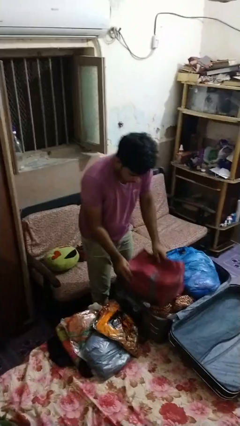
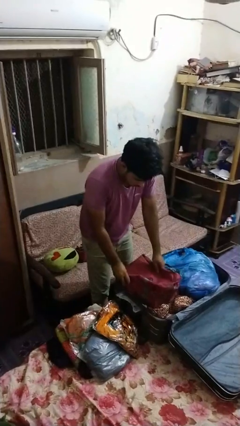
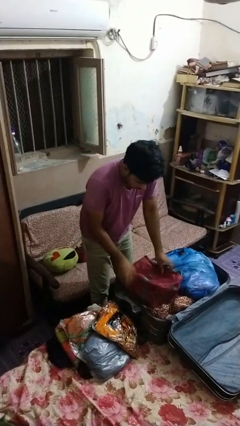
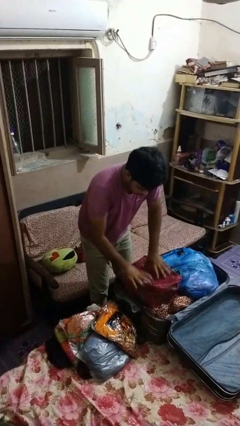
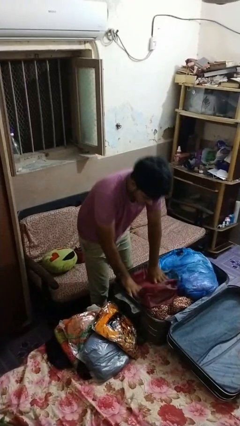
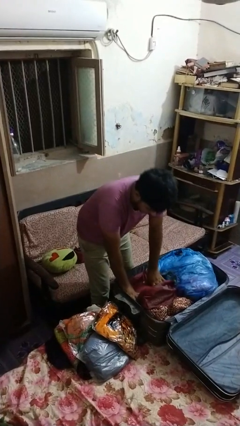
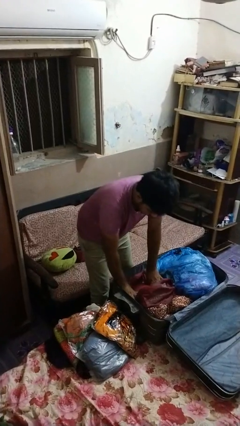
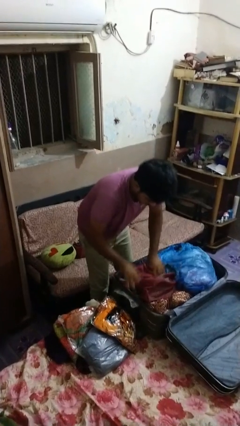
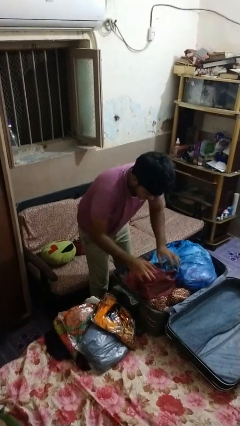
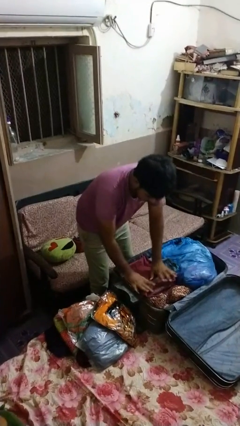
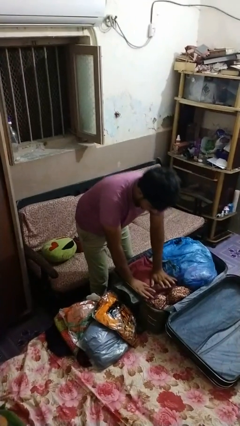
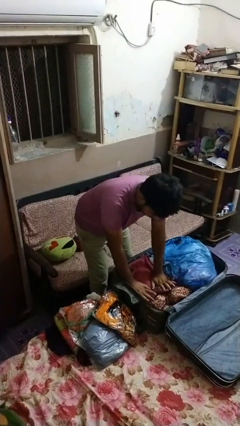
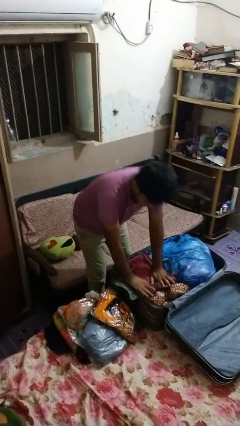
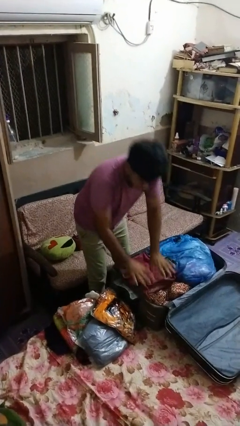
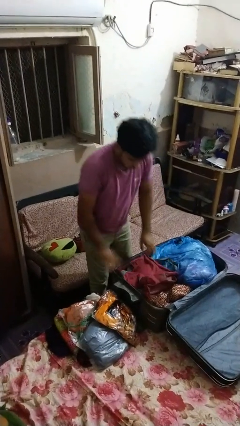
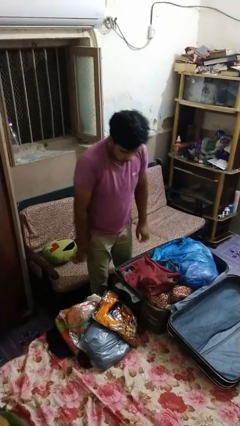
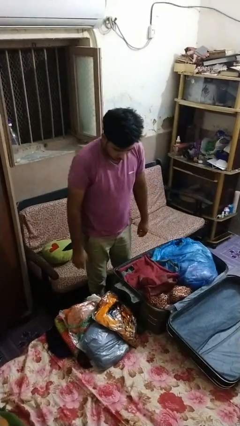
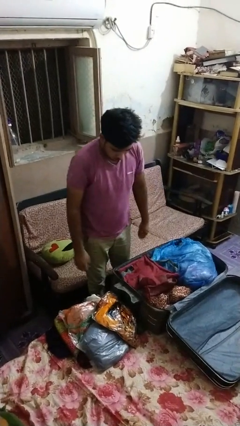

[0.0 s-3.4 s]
person loads clothes into suitcase

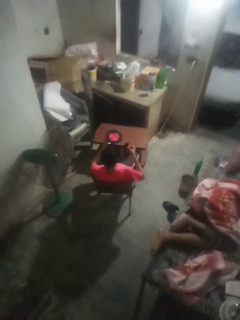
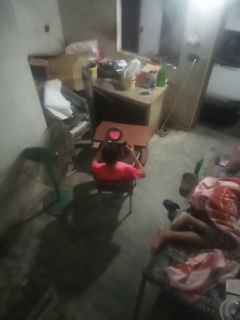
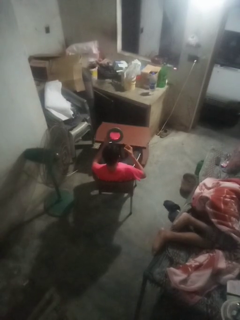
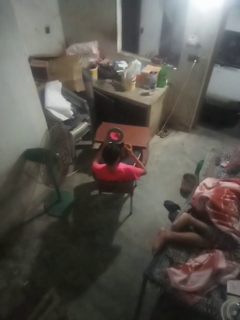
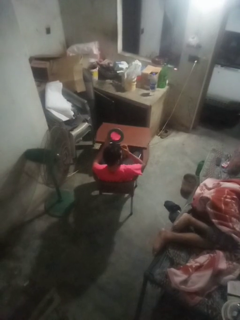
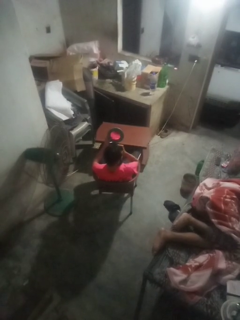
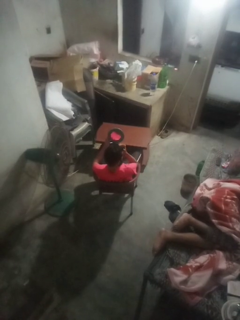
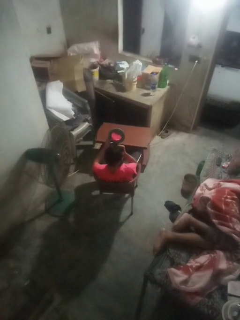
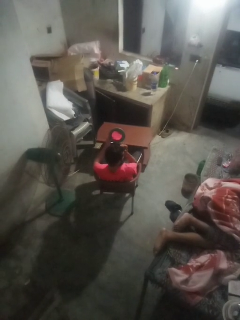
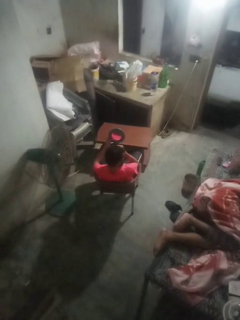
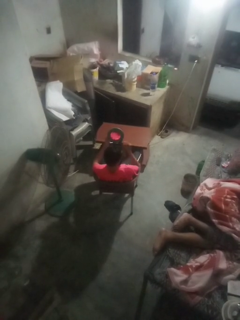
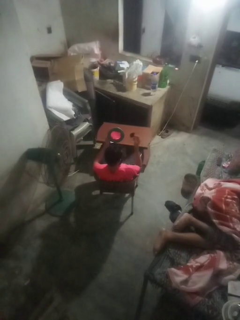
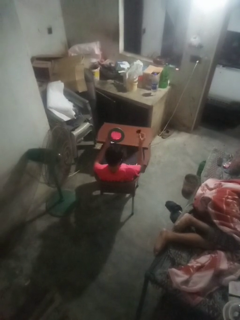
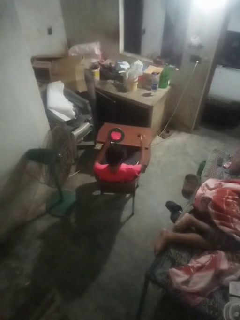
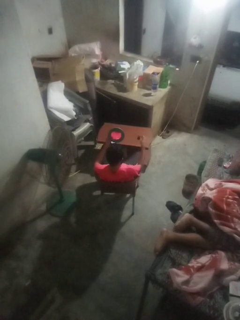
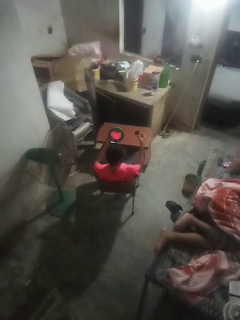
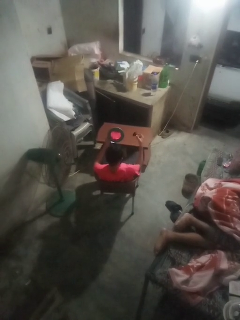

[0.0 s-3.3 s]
person applies eye makeup

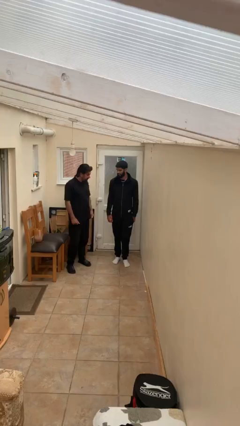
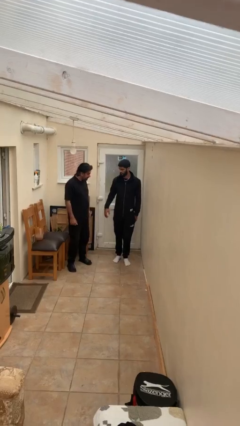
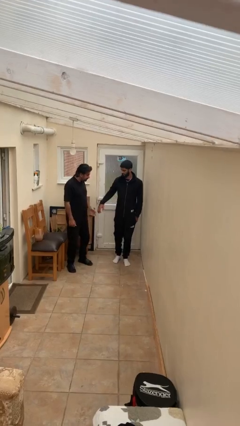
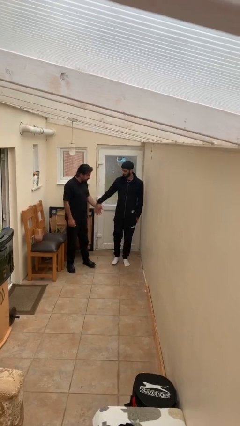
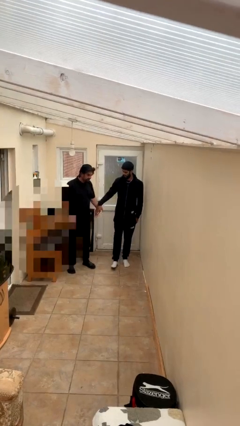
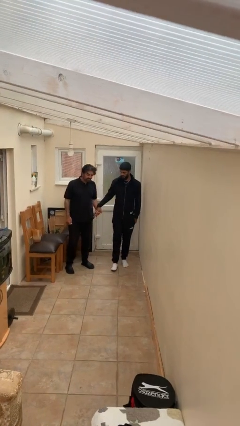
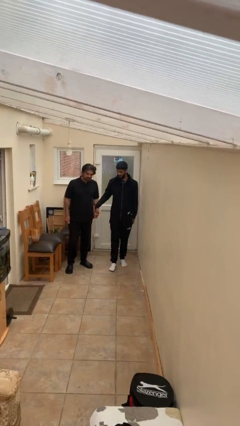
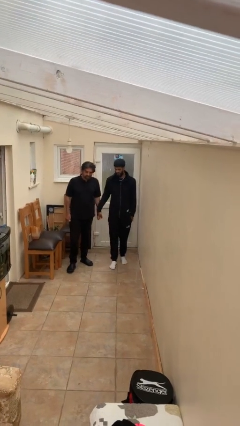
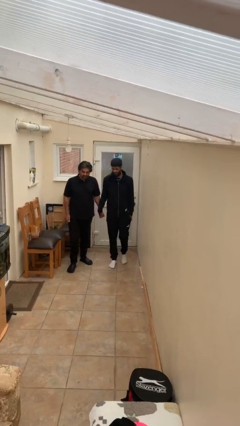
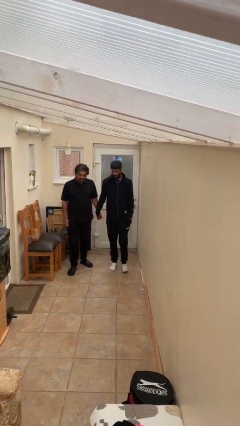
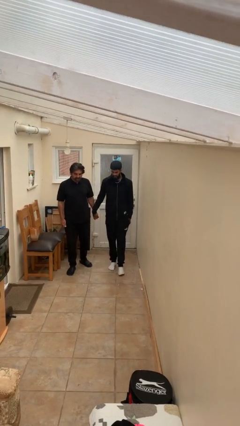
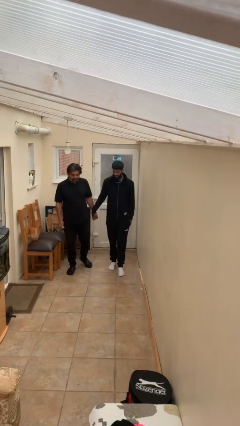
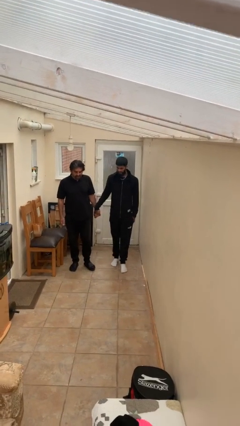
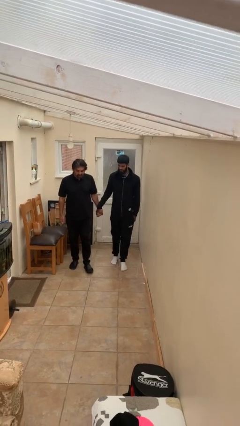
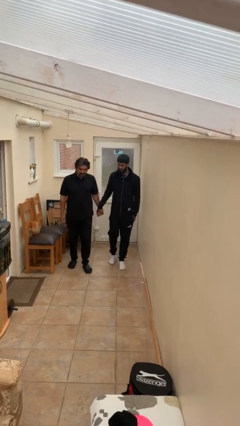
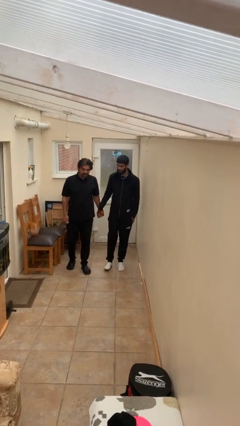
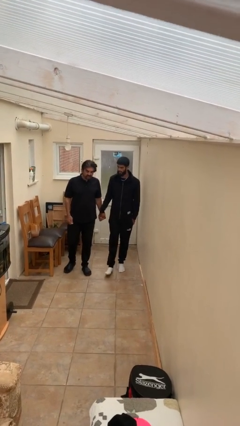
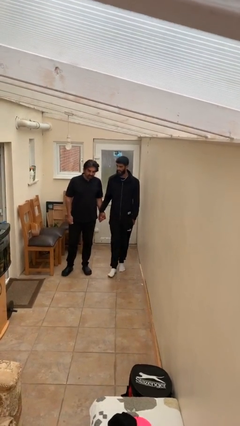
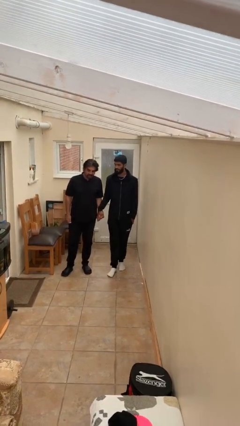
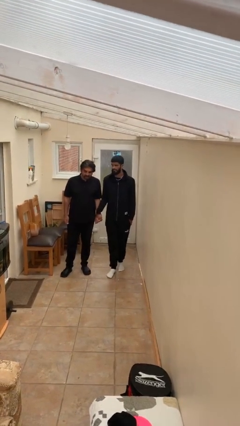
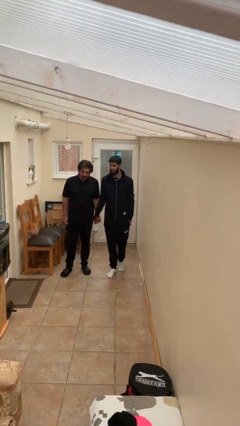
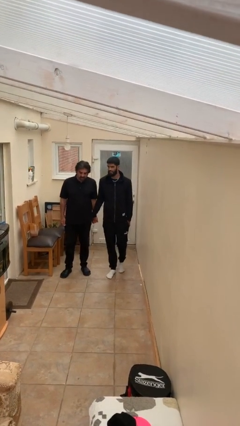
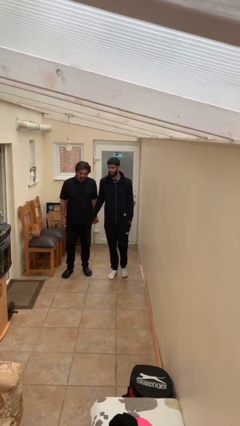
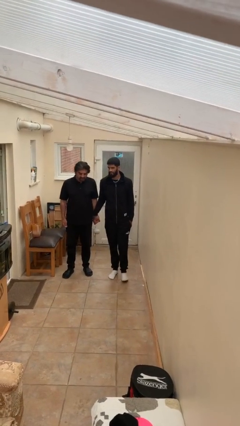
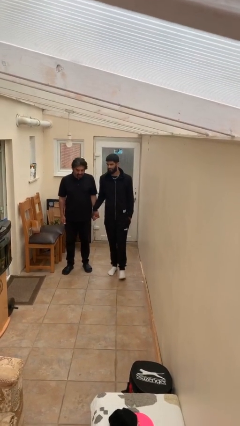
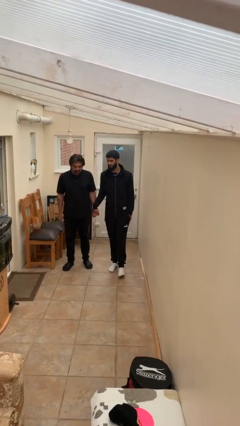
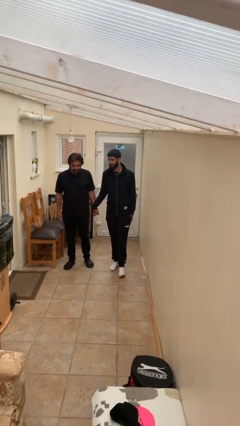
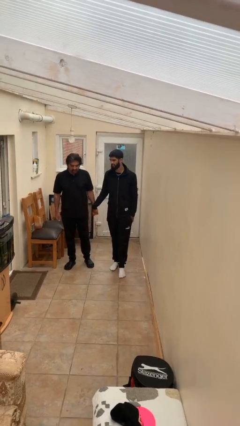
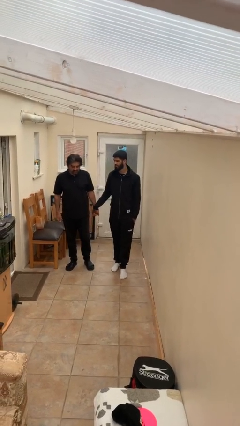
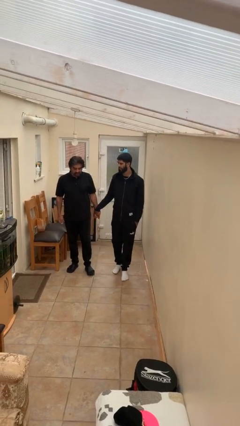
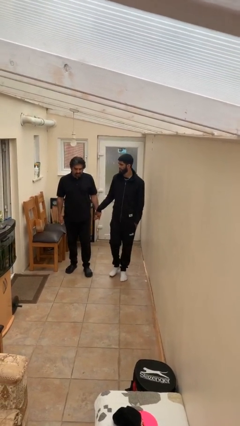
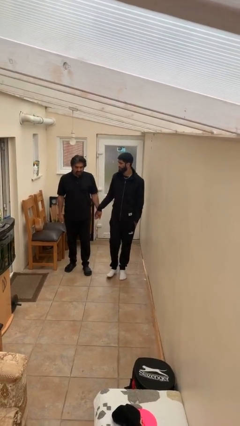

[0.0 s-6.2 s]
person holds hand

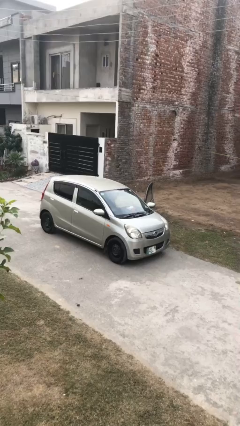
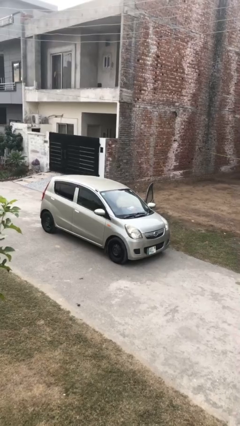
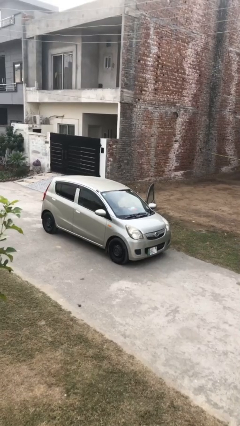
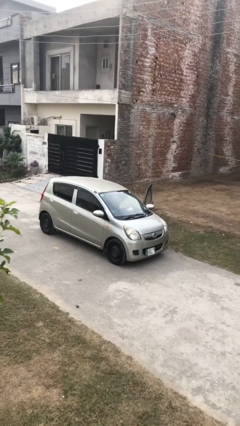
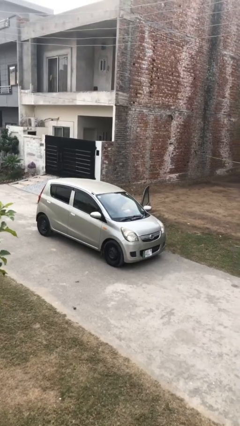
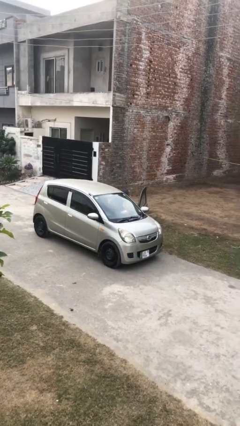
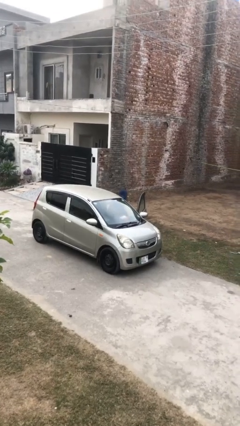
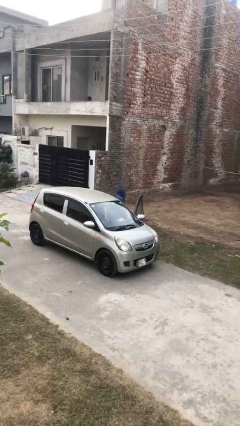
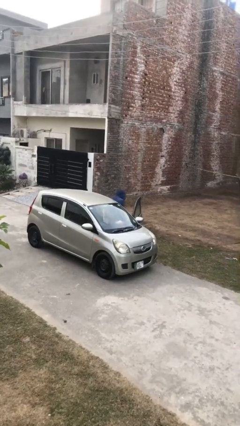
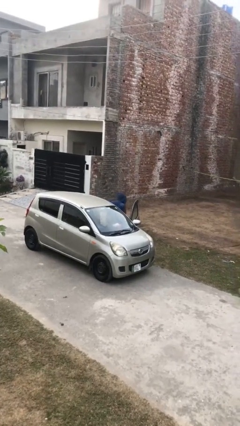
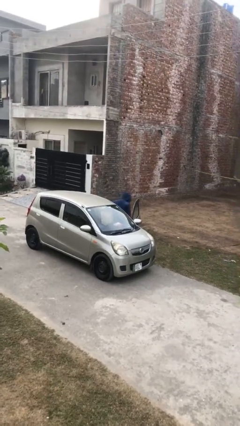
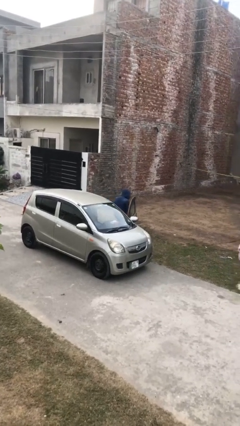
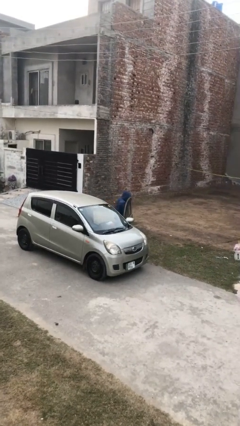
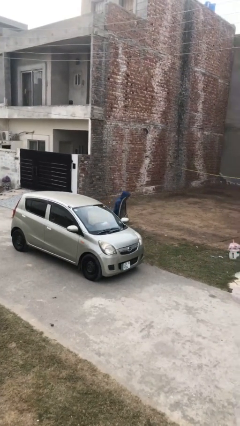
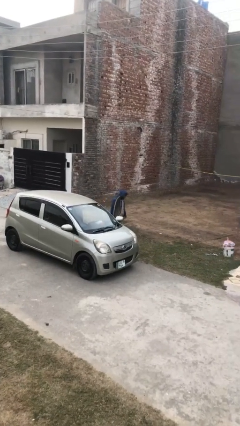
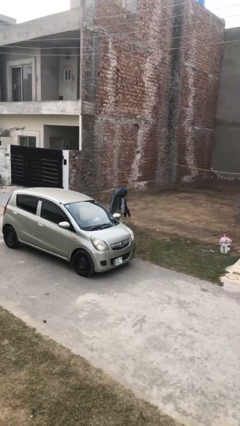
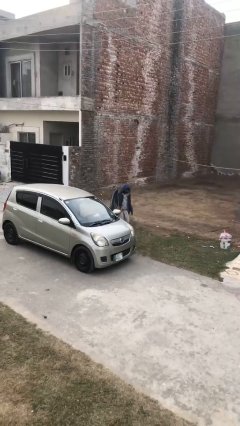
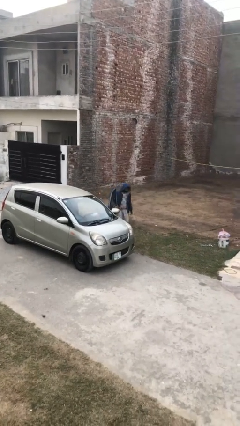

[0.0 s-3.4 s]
person exits car

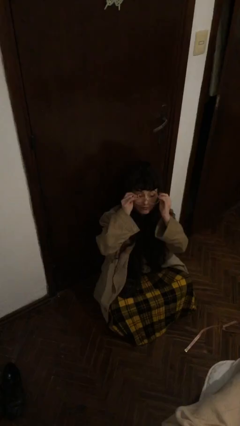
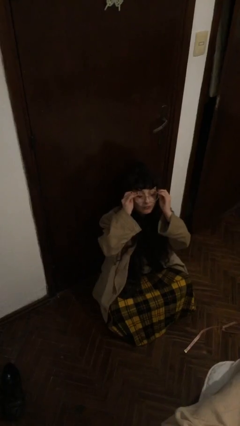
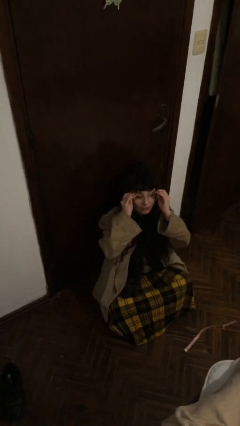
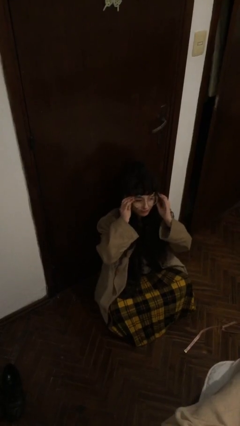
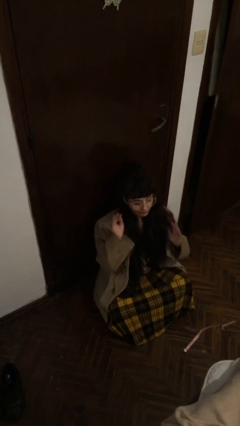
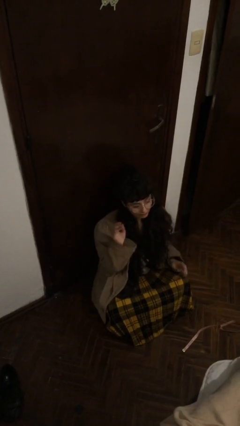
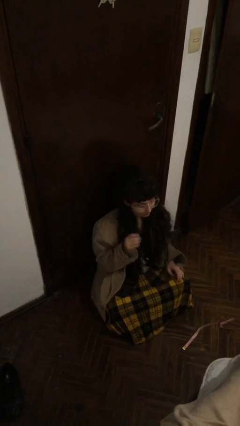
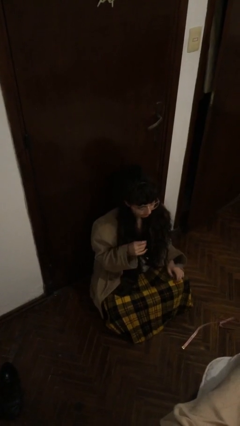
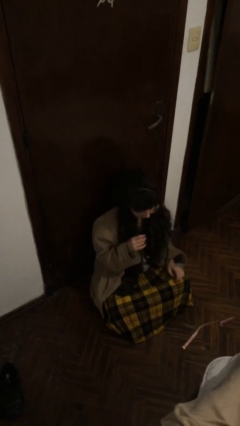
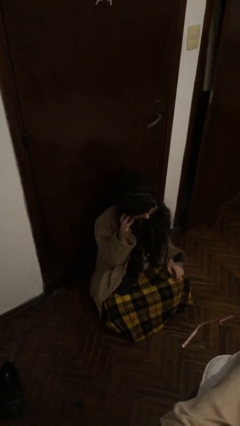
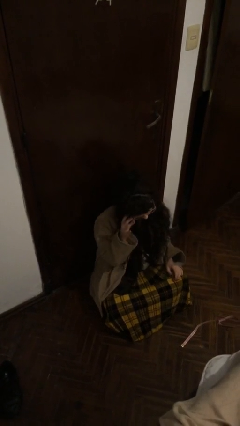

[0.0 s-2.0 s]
person puts on glasses

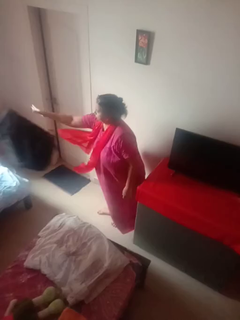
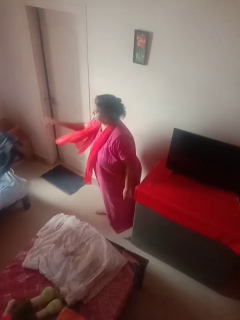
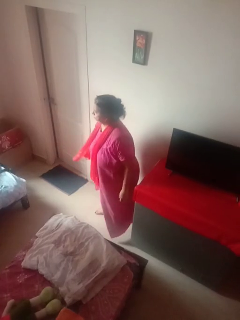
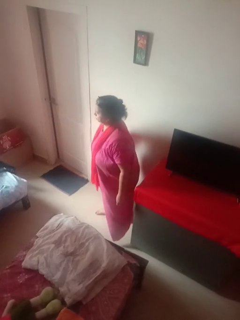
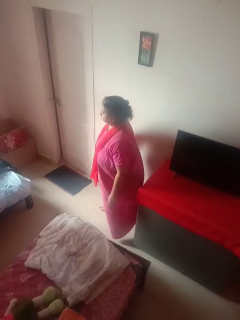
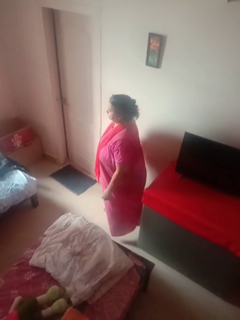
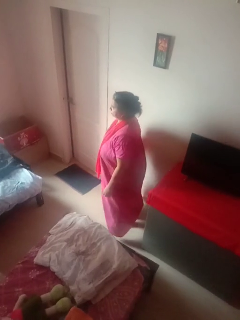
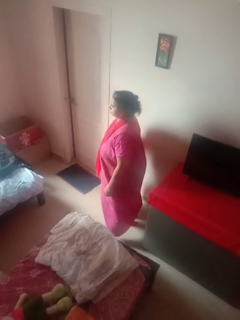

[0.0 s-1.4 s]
person throws object on bed
